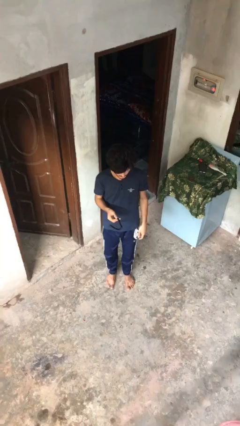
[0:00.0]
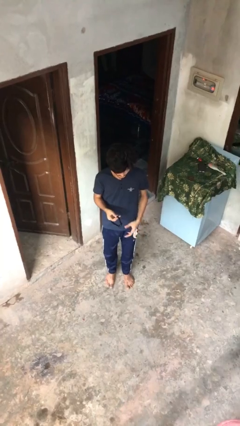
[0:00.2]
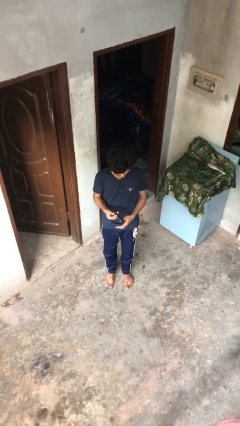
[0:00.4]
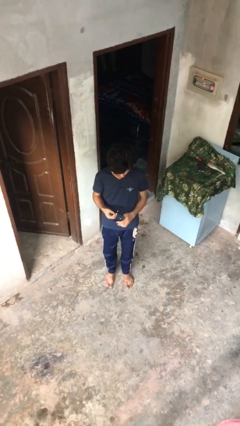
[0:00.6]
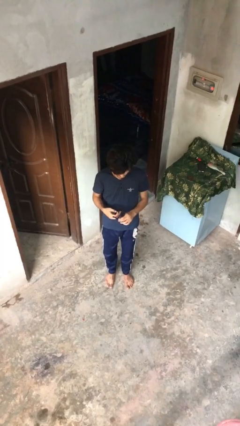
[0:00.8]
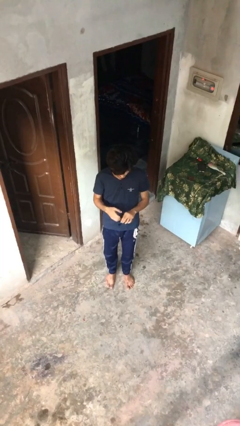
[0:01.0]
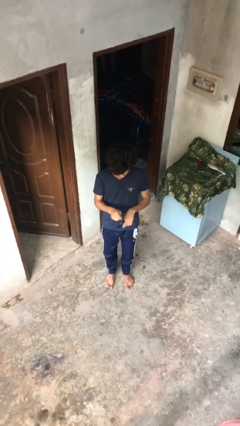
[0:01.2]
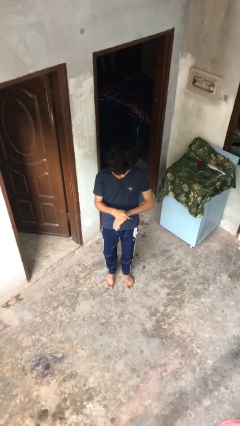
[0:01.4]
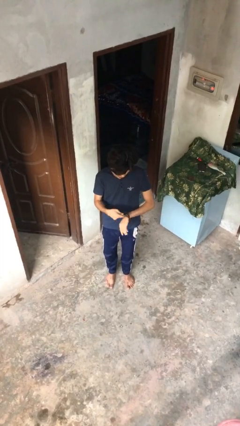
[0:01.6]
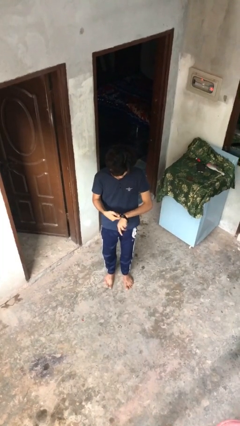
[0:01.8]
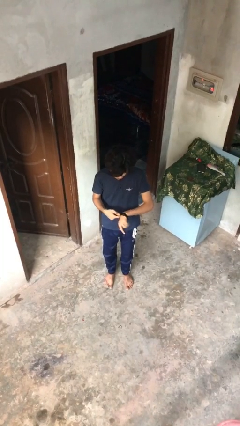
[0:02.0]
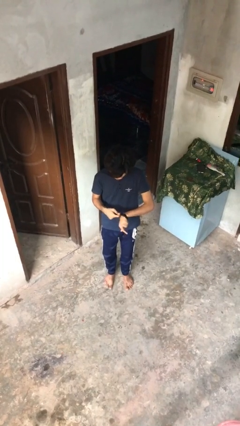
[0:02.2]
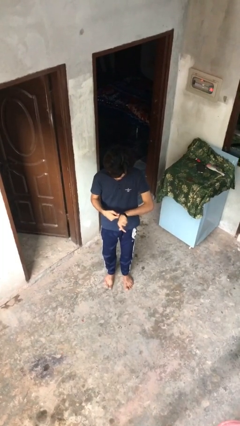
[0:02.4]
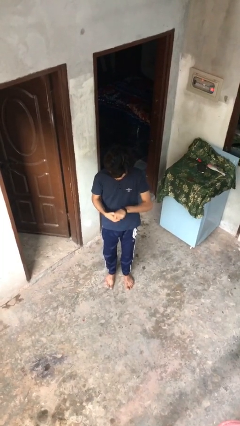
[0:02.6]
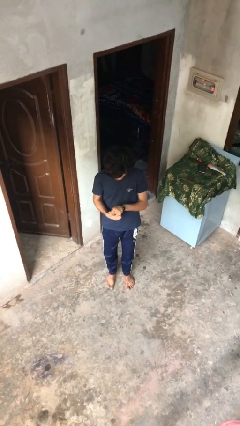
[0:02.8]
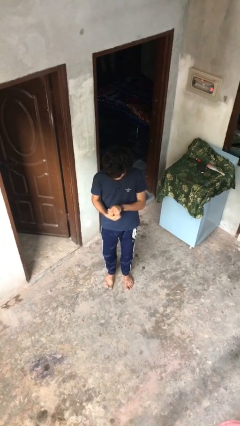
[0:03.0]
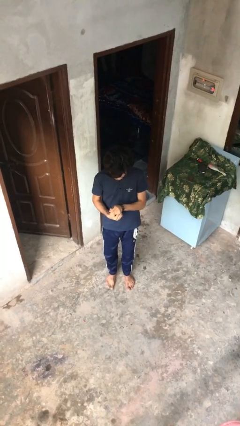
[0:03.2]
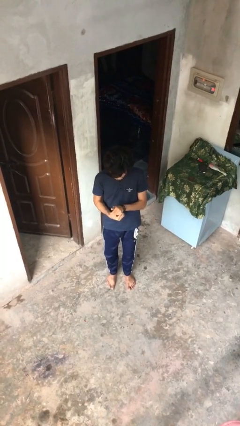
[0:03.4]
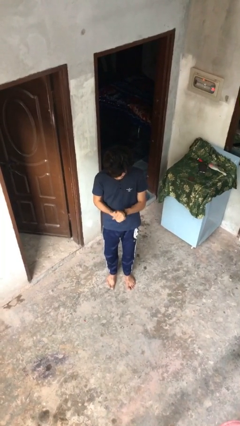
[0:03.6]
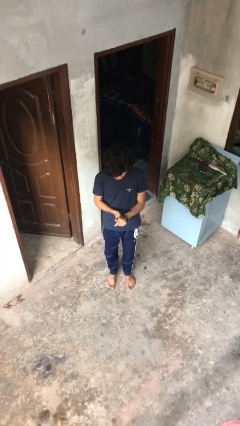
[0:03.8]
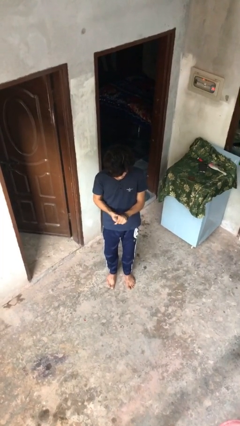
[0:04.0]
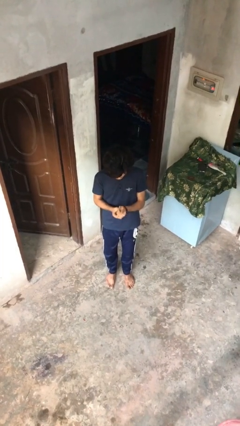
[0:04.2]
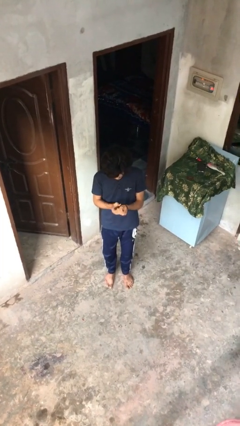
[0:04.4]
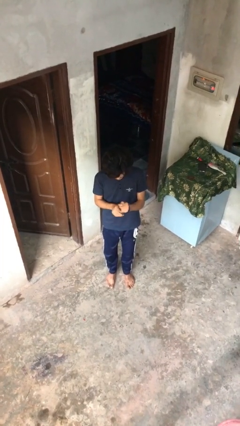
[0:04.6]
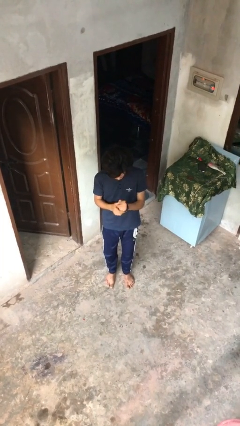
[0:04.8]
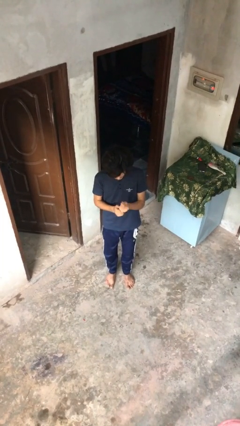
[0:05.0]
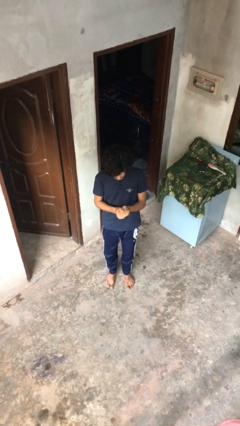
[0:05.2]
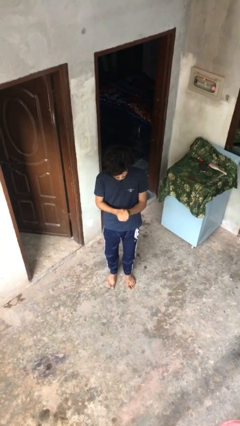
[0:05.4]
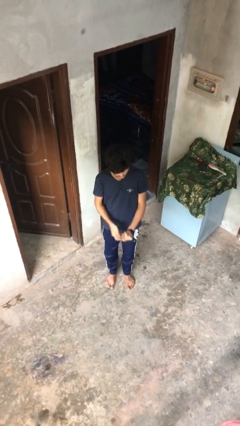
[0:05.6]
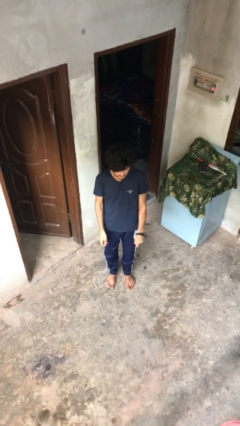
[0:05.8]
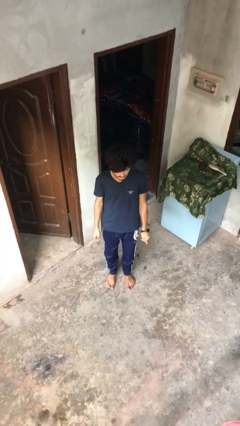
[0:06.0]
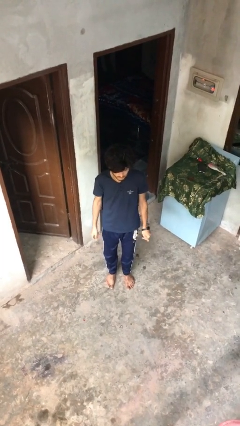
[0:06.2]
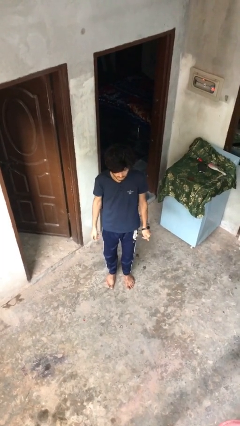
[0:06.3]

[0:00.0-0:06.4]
person puts on wristwatch

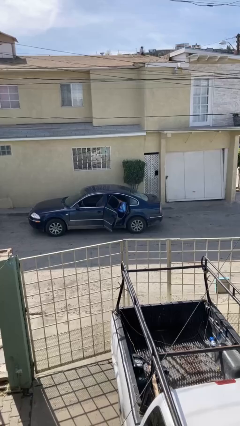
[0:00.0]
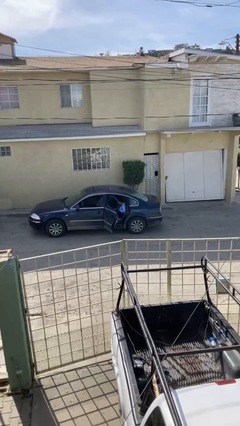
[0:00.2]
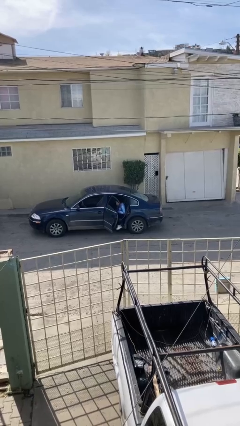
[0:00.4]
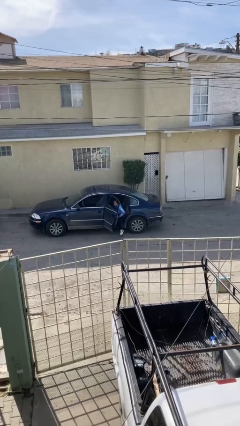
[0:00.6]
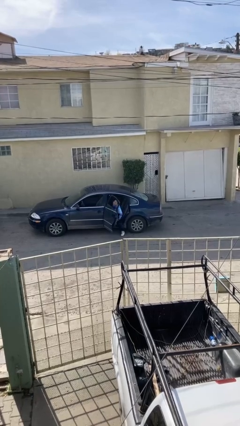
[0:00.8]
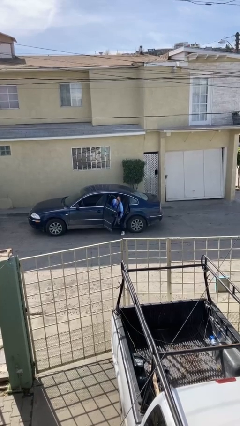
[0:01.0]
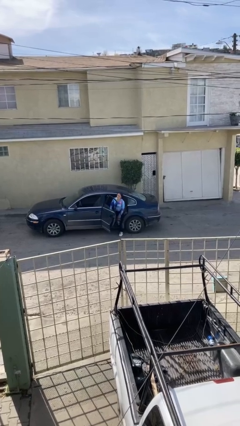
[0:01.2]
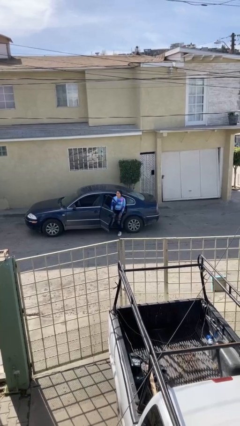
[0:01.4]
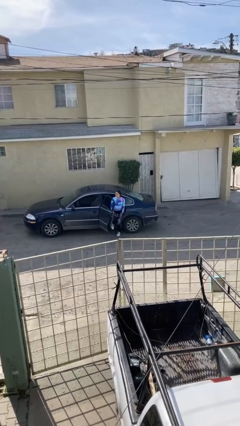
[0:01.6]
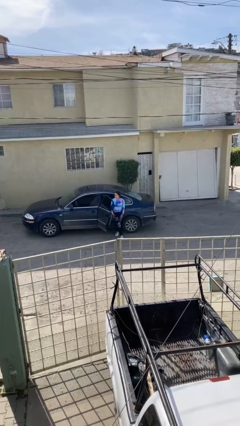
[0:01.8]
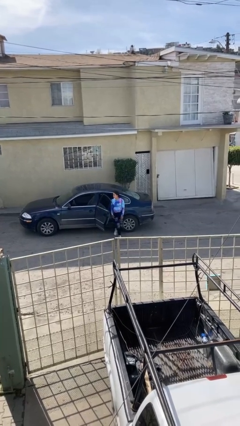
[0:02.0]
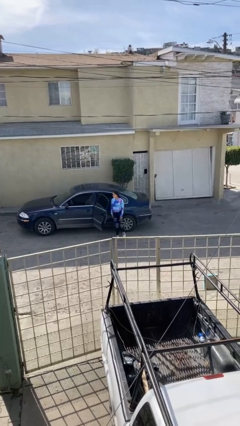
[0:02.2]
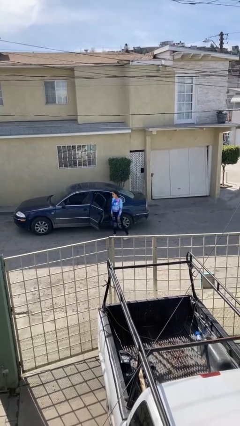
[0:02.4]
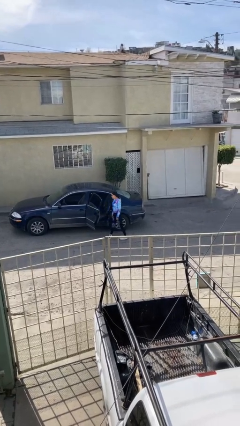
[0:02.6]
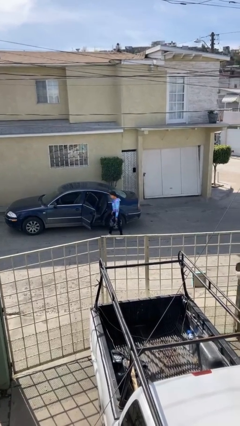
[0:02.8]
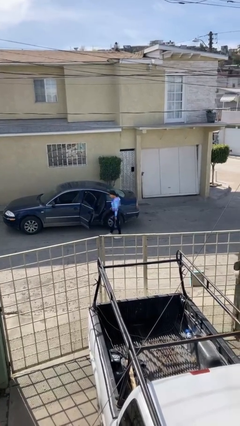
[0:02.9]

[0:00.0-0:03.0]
person exits car

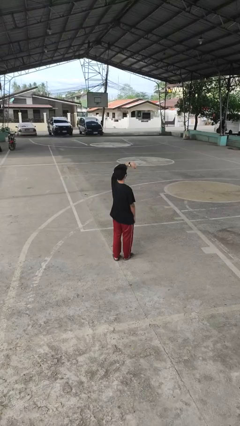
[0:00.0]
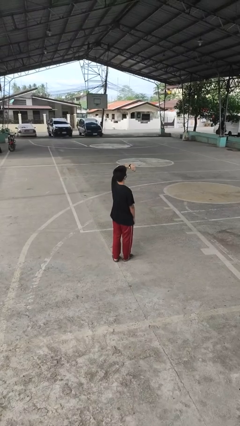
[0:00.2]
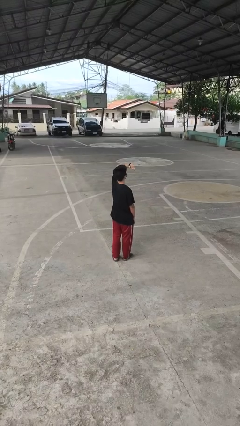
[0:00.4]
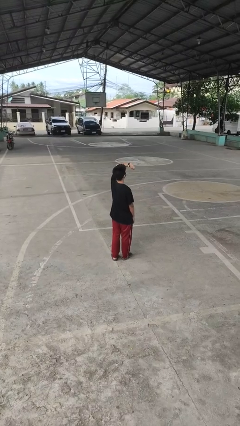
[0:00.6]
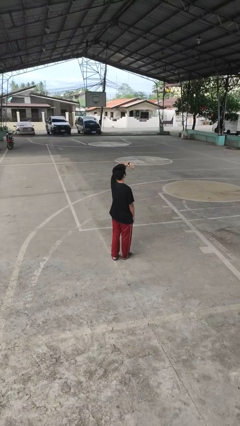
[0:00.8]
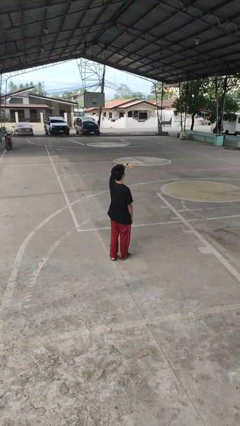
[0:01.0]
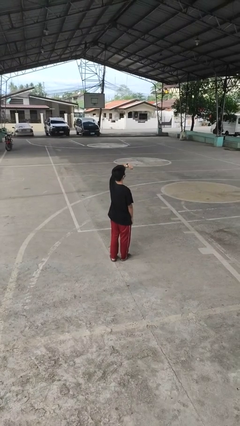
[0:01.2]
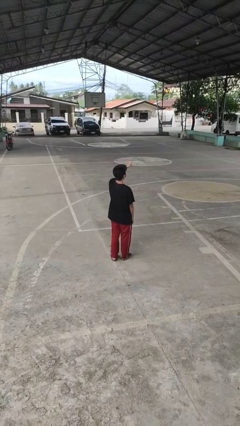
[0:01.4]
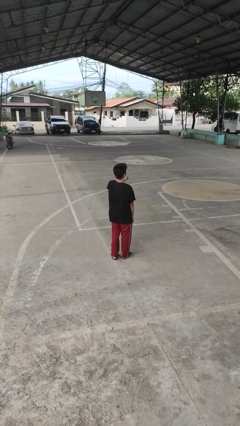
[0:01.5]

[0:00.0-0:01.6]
person looks at wristwatch

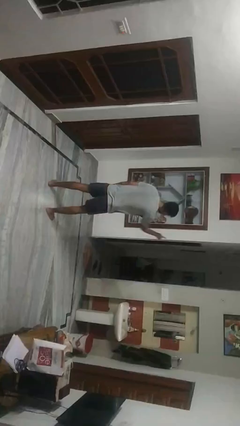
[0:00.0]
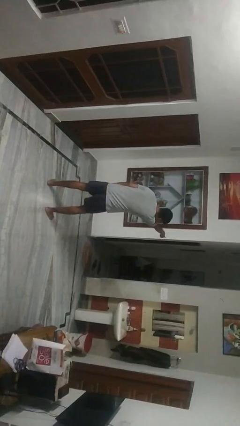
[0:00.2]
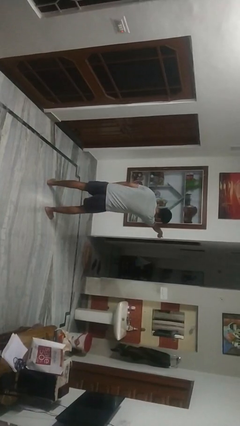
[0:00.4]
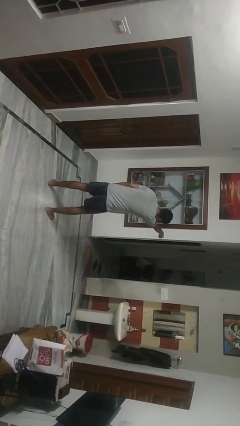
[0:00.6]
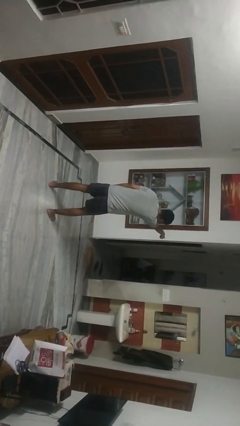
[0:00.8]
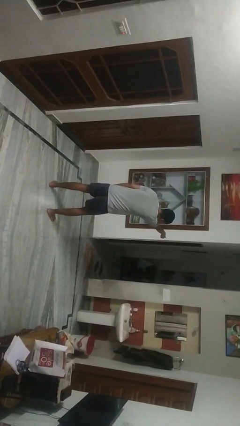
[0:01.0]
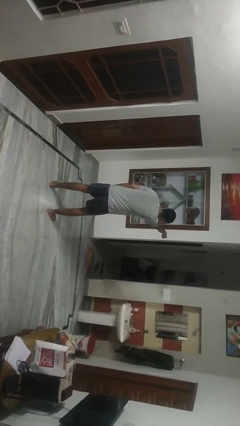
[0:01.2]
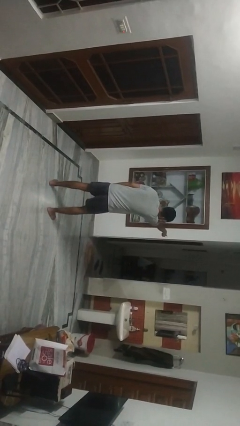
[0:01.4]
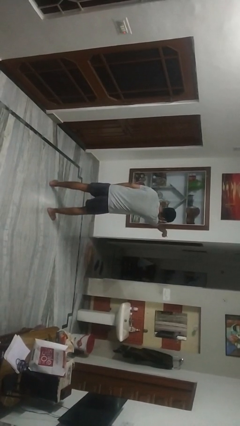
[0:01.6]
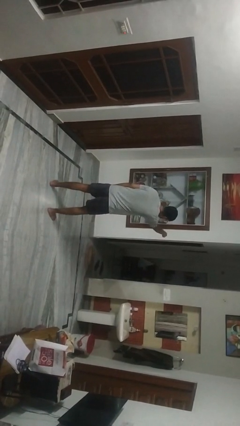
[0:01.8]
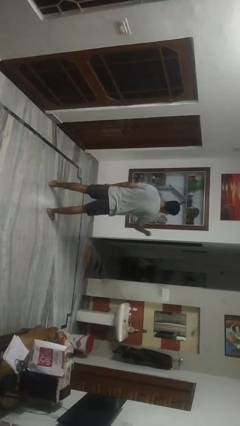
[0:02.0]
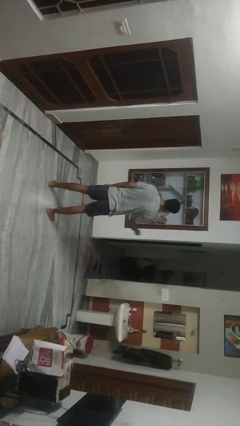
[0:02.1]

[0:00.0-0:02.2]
person points at person

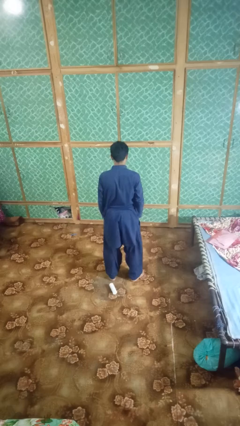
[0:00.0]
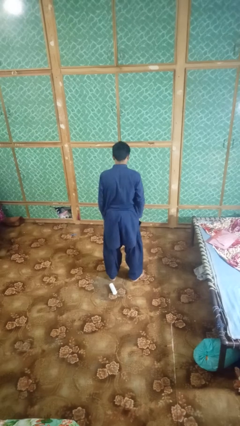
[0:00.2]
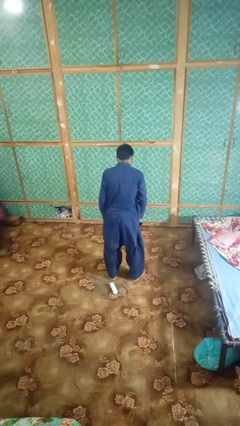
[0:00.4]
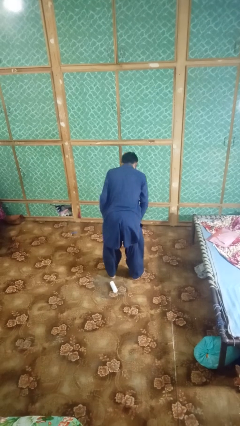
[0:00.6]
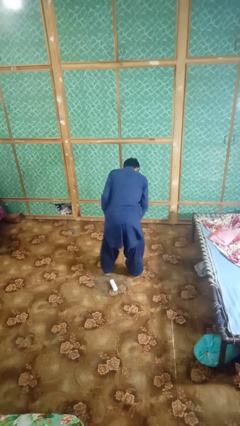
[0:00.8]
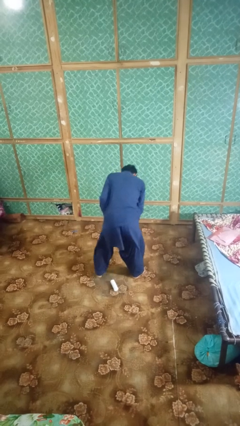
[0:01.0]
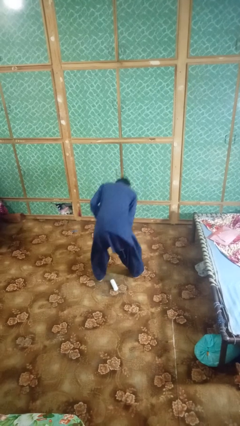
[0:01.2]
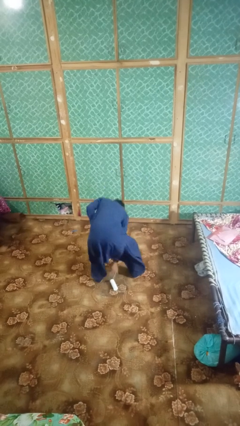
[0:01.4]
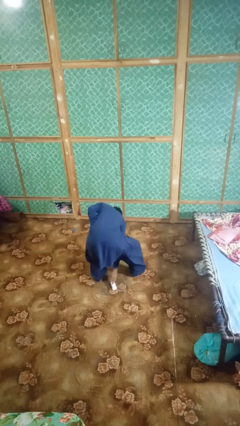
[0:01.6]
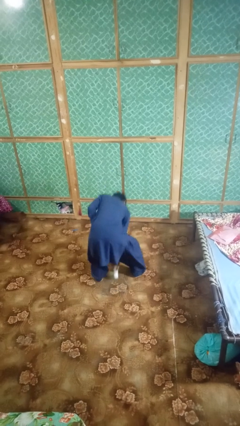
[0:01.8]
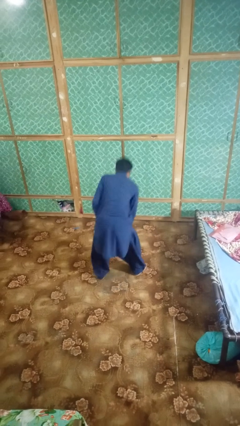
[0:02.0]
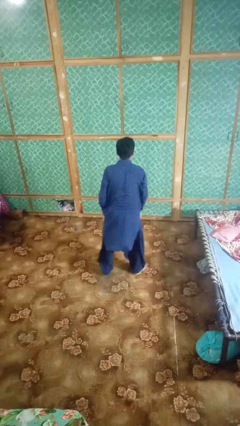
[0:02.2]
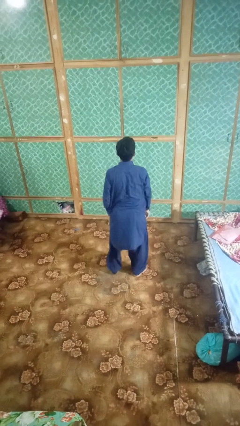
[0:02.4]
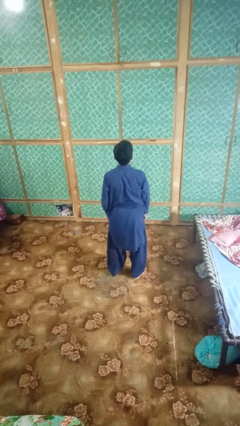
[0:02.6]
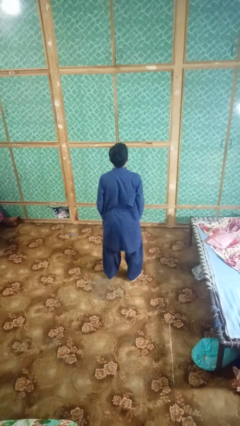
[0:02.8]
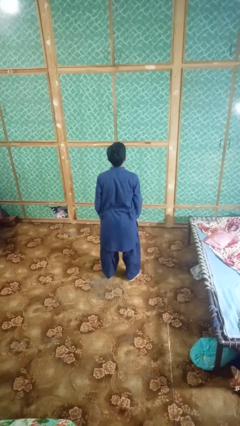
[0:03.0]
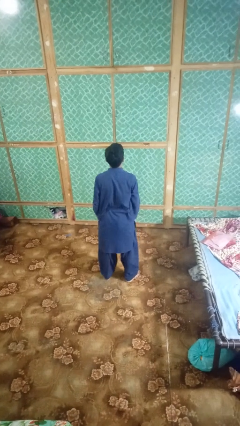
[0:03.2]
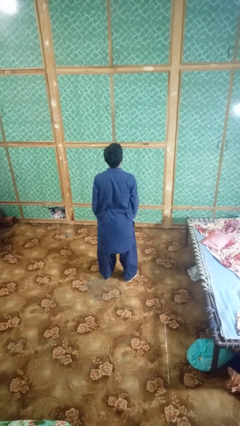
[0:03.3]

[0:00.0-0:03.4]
person picks up object from floor

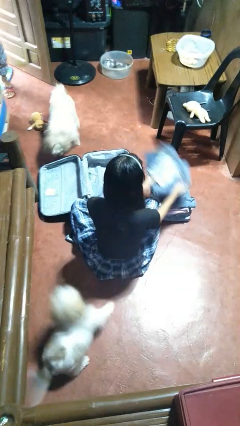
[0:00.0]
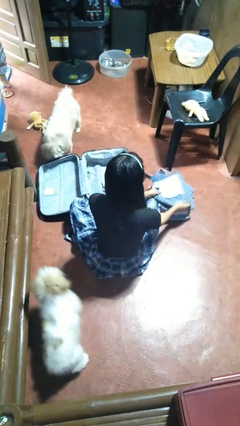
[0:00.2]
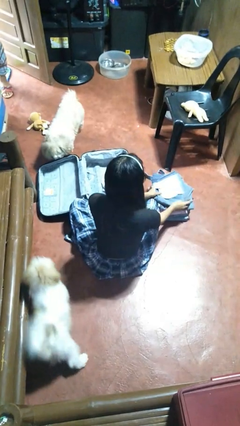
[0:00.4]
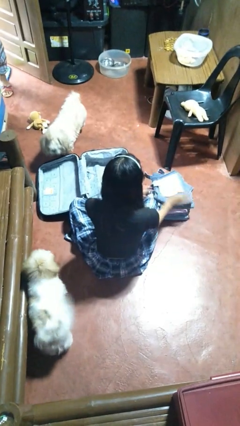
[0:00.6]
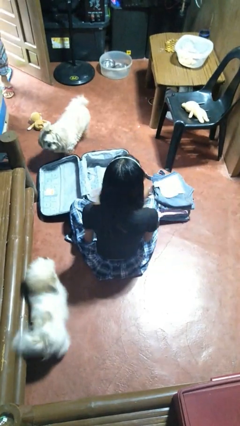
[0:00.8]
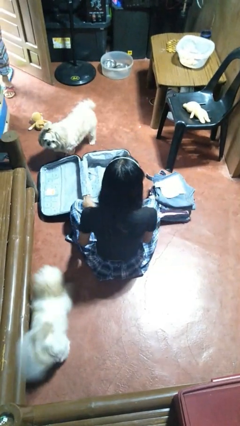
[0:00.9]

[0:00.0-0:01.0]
person unloads clothes from suitcase

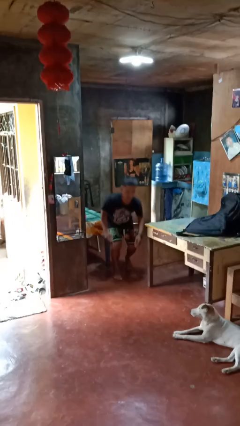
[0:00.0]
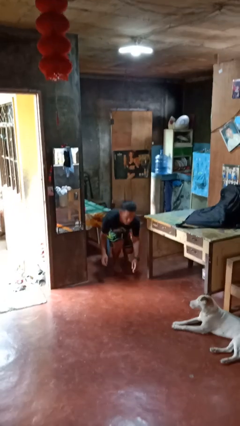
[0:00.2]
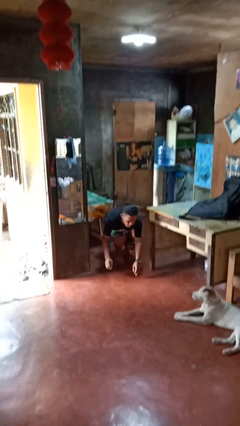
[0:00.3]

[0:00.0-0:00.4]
person trips on object on floor
